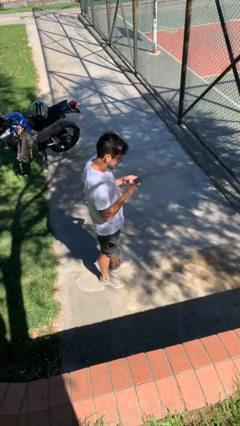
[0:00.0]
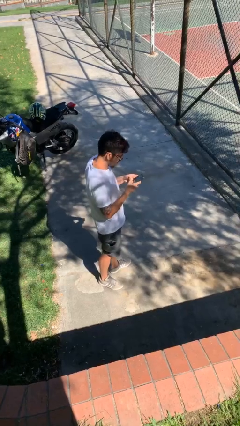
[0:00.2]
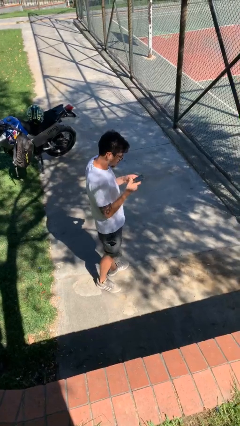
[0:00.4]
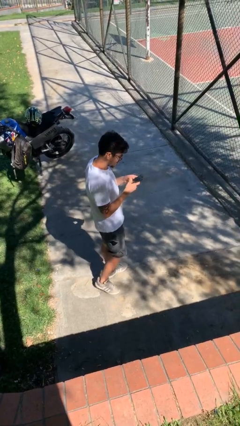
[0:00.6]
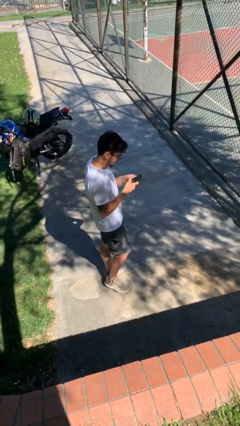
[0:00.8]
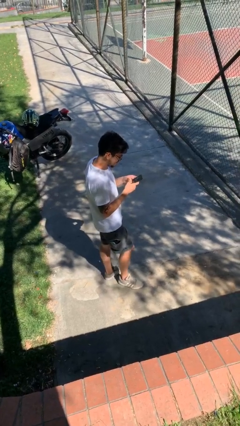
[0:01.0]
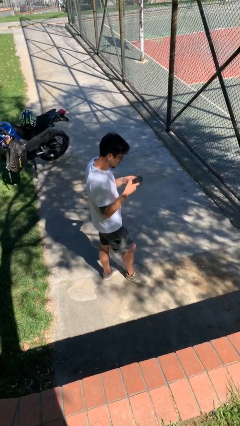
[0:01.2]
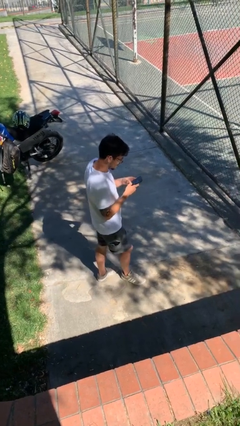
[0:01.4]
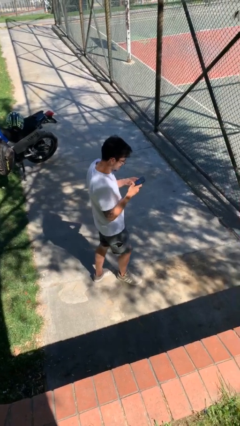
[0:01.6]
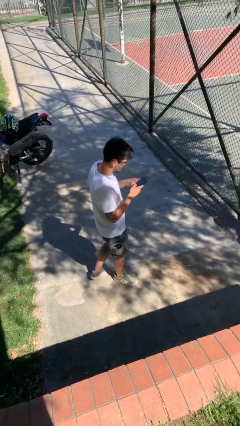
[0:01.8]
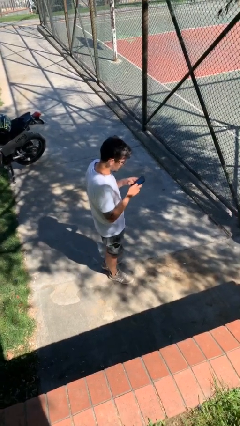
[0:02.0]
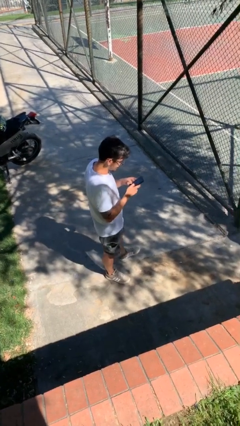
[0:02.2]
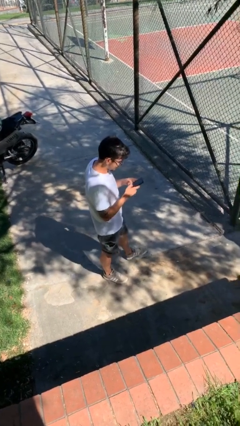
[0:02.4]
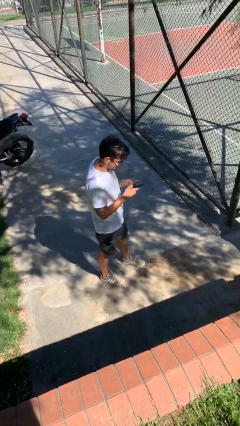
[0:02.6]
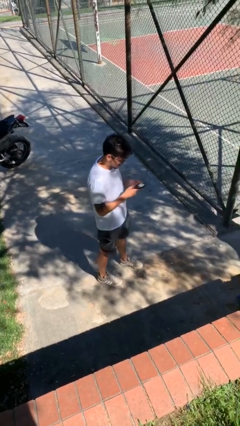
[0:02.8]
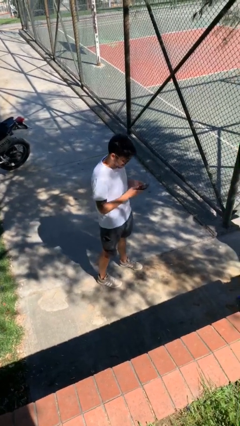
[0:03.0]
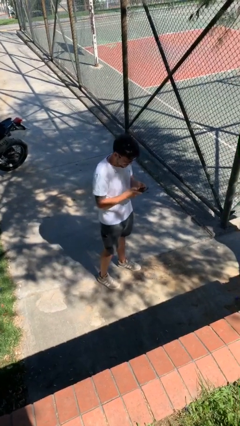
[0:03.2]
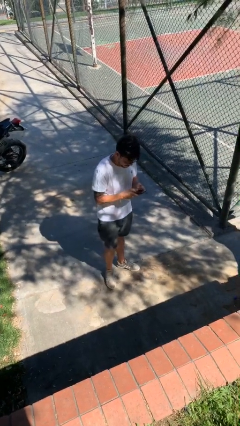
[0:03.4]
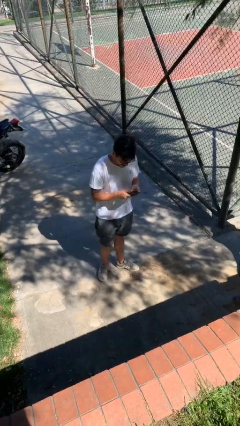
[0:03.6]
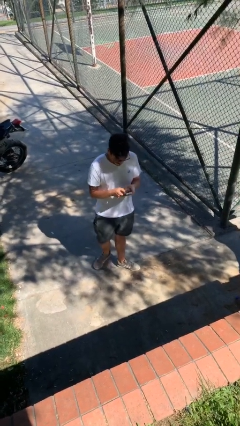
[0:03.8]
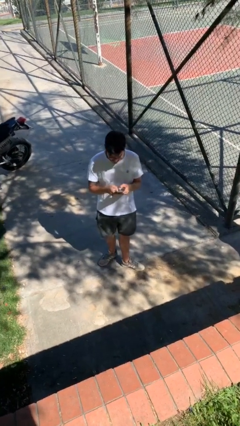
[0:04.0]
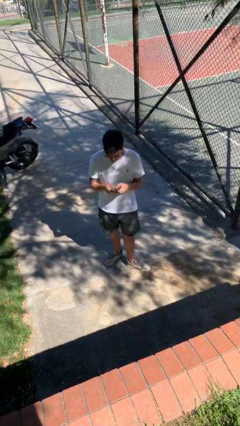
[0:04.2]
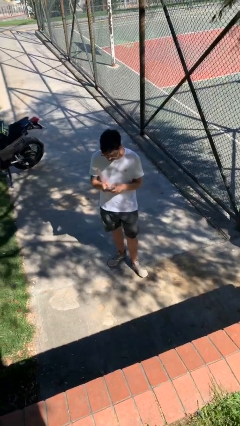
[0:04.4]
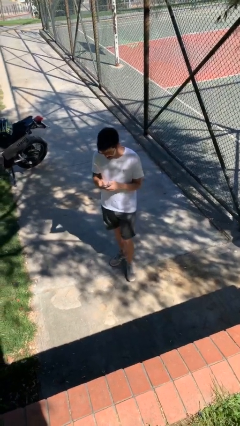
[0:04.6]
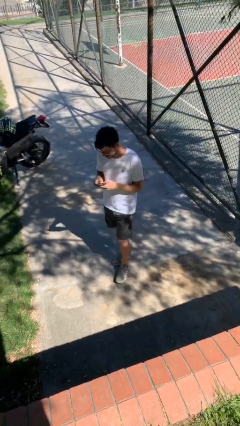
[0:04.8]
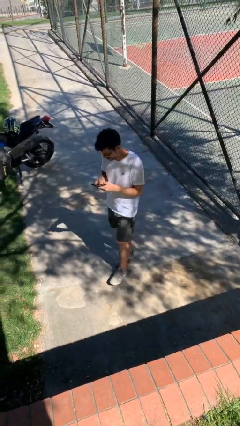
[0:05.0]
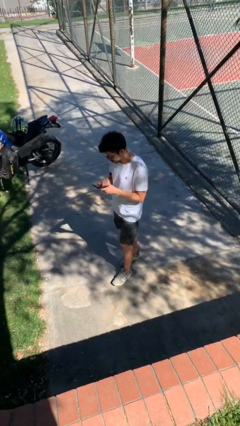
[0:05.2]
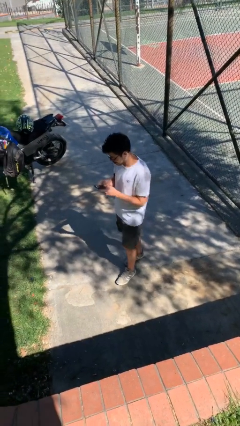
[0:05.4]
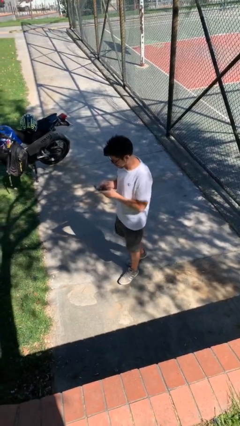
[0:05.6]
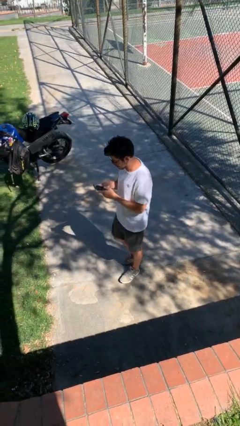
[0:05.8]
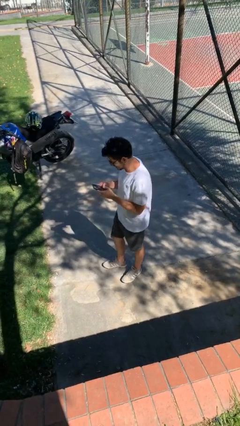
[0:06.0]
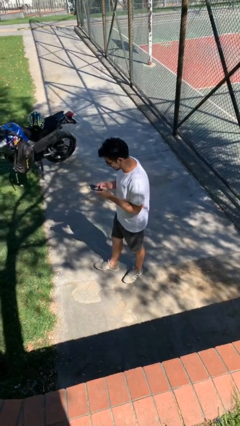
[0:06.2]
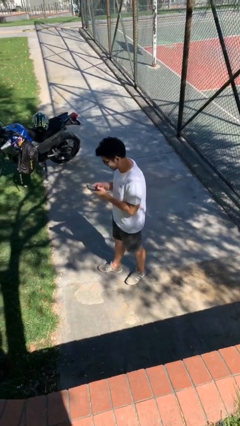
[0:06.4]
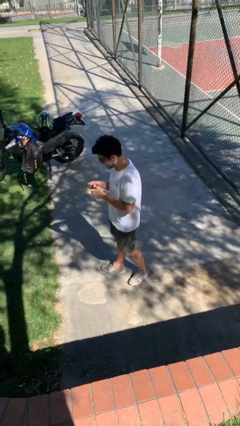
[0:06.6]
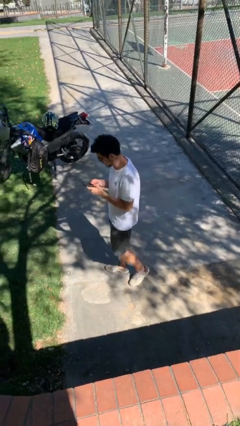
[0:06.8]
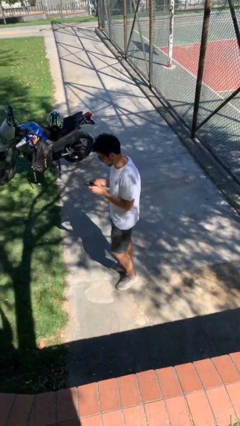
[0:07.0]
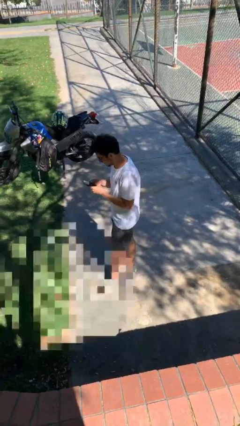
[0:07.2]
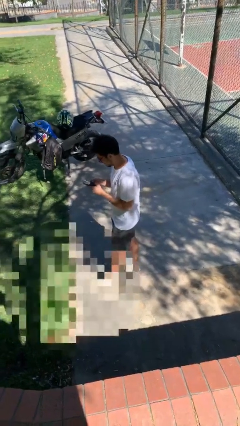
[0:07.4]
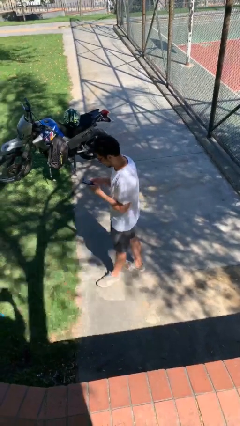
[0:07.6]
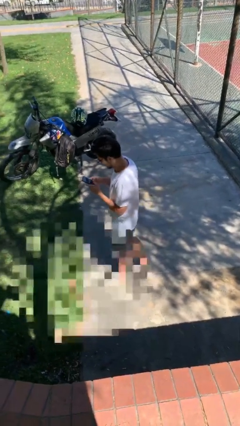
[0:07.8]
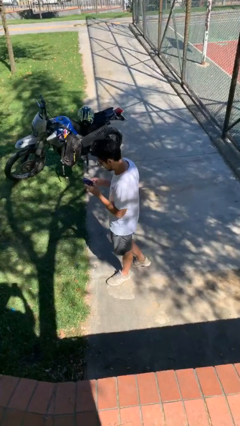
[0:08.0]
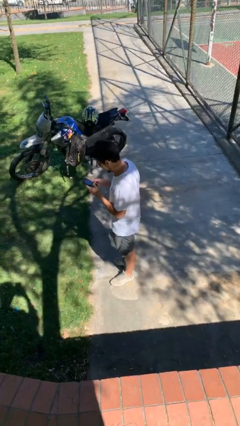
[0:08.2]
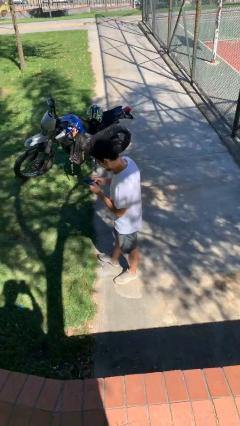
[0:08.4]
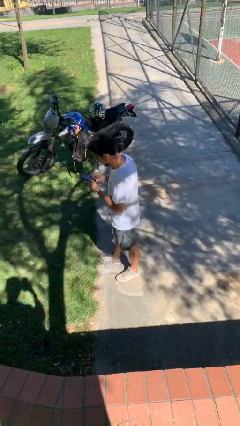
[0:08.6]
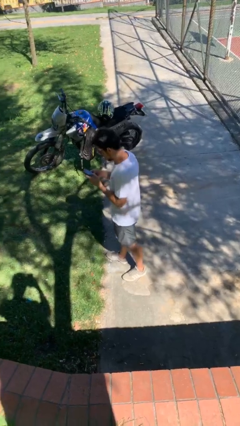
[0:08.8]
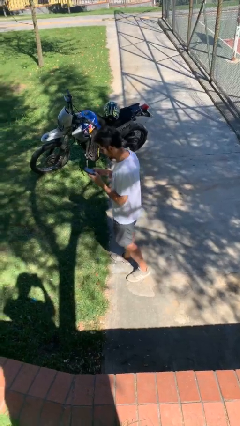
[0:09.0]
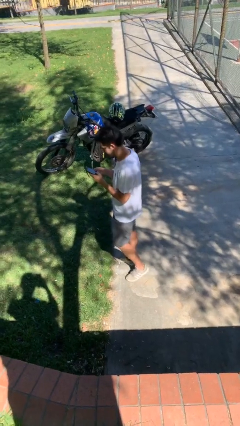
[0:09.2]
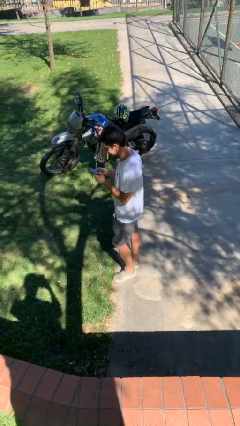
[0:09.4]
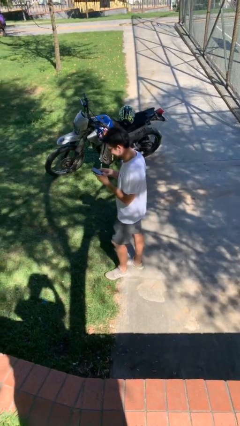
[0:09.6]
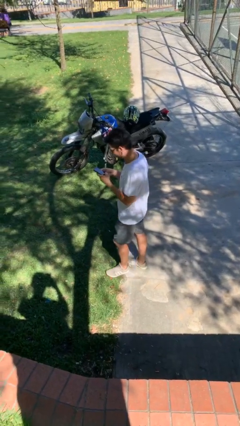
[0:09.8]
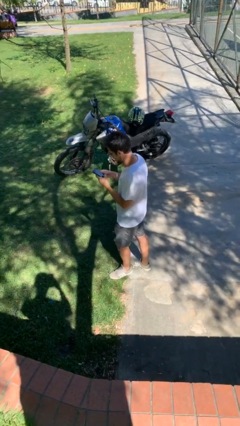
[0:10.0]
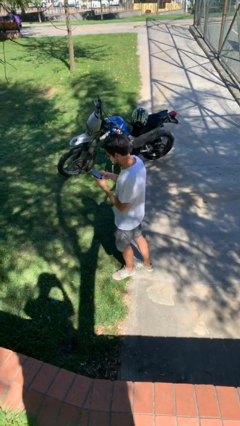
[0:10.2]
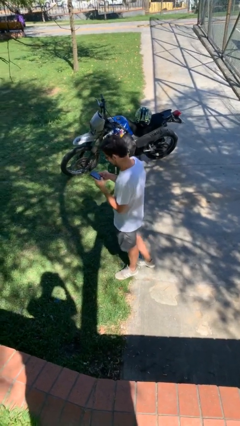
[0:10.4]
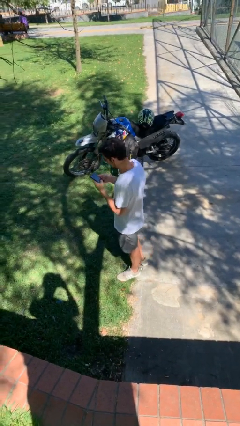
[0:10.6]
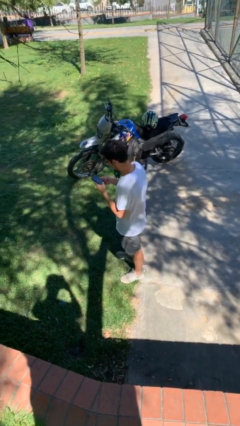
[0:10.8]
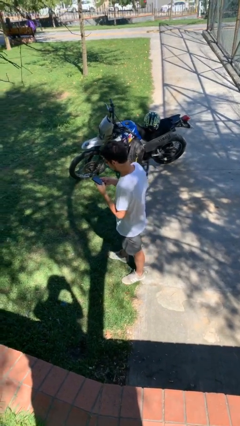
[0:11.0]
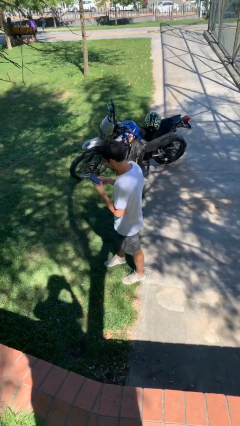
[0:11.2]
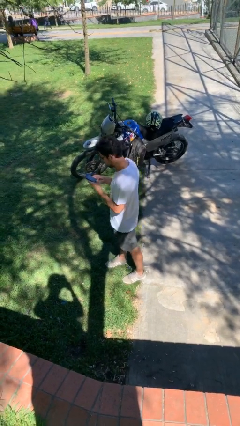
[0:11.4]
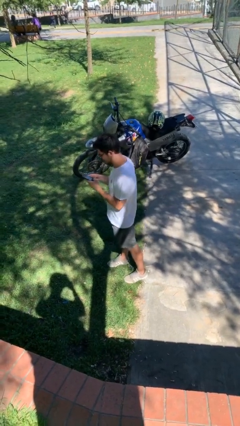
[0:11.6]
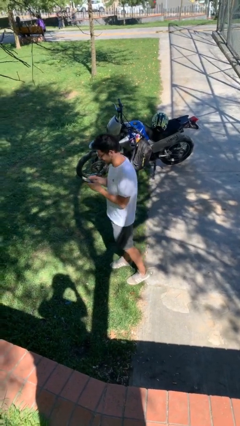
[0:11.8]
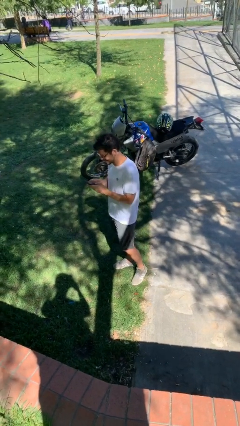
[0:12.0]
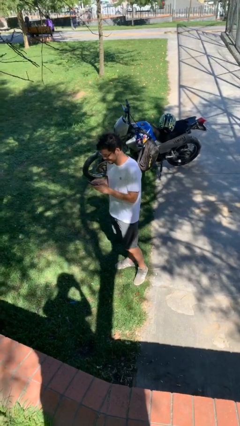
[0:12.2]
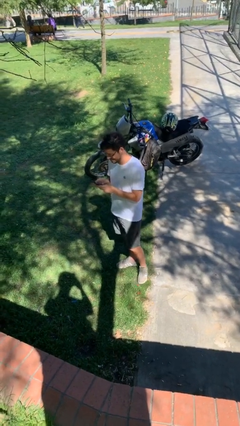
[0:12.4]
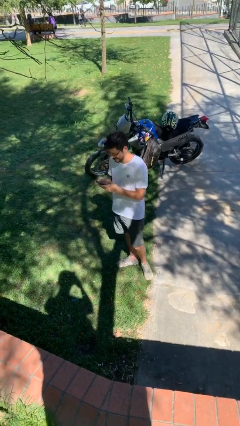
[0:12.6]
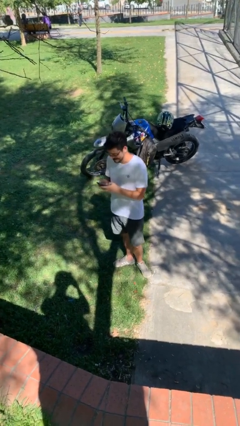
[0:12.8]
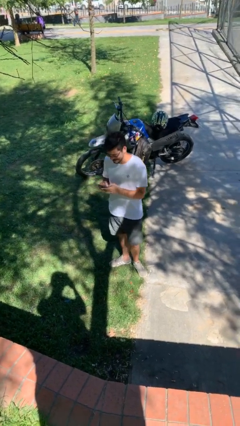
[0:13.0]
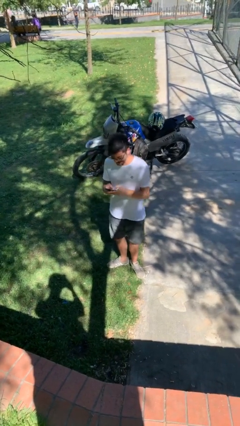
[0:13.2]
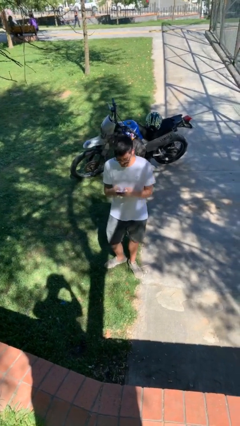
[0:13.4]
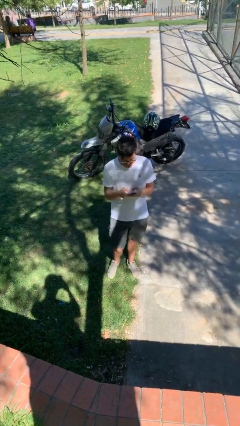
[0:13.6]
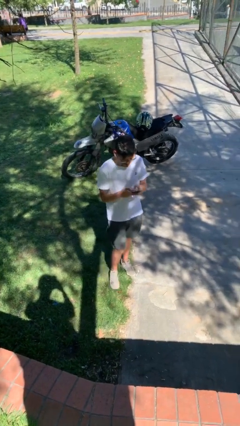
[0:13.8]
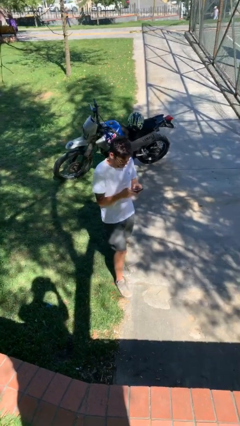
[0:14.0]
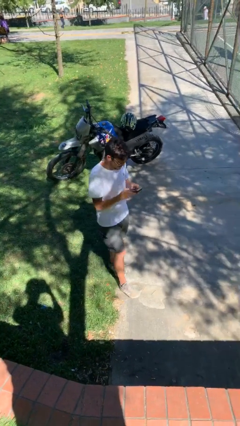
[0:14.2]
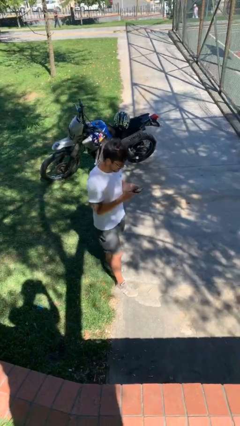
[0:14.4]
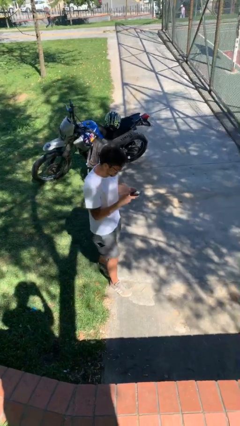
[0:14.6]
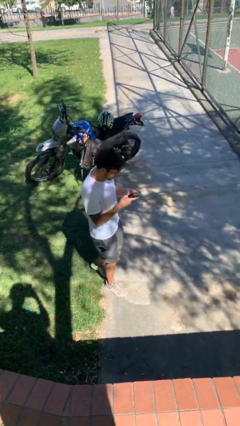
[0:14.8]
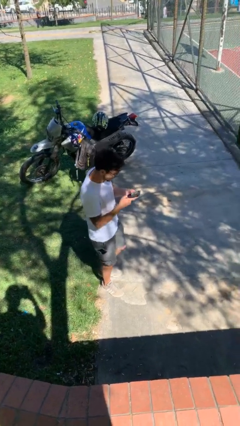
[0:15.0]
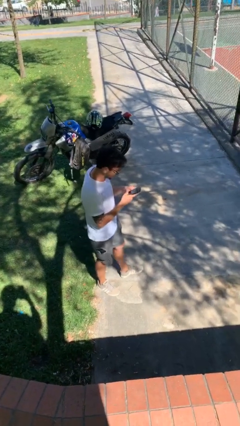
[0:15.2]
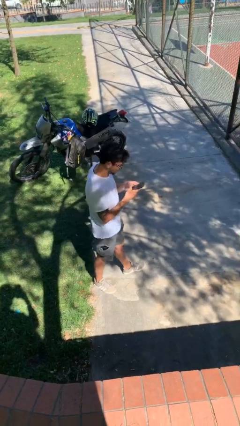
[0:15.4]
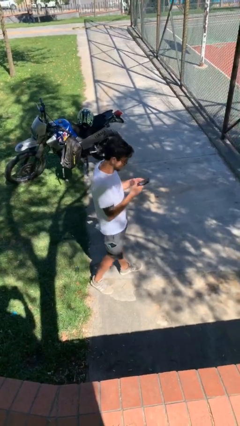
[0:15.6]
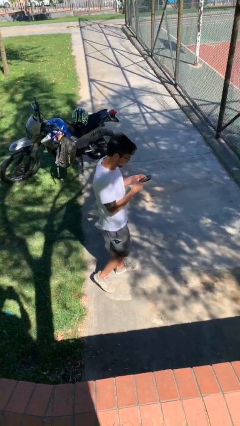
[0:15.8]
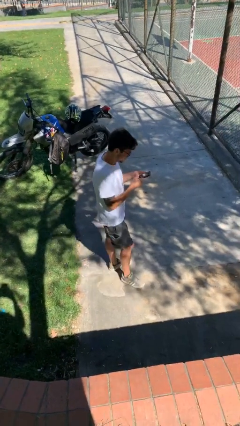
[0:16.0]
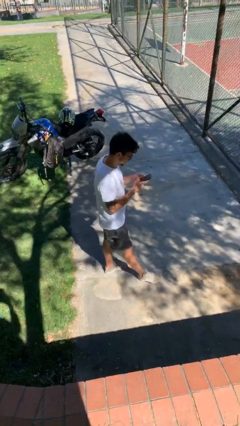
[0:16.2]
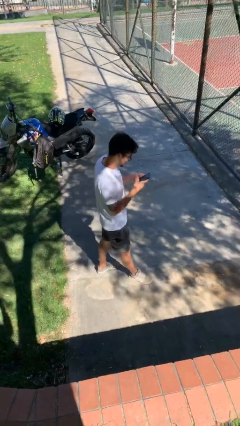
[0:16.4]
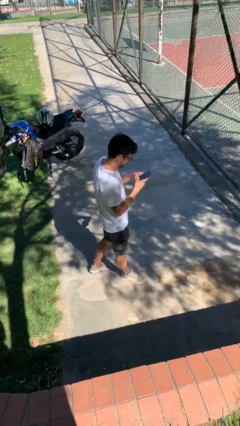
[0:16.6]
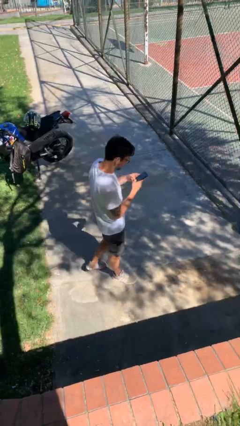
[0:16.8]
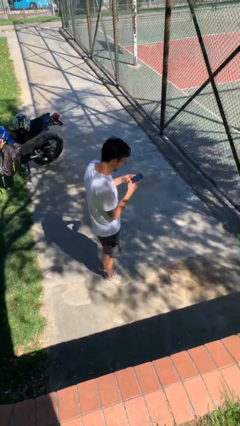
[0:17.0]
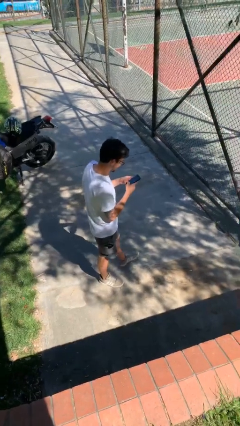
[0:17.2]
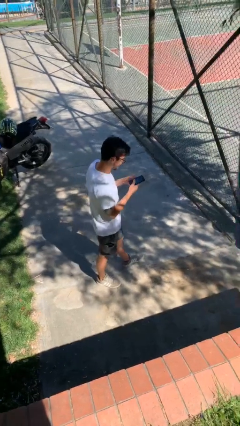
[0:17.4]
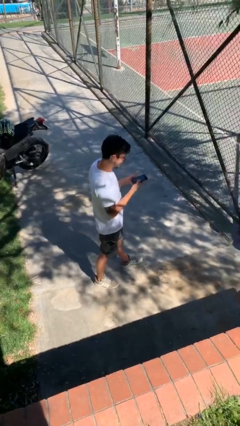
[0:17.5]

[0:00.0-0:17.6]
person texts on phone

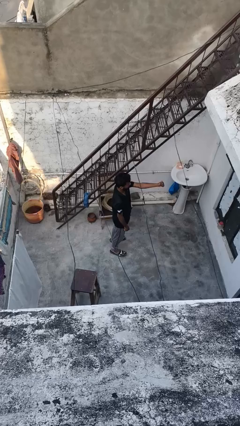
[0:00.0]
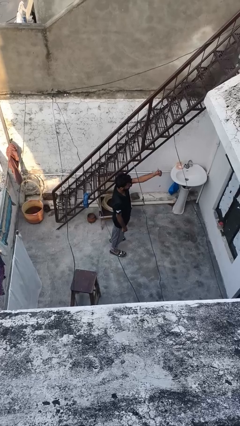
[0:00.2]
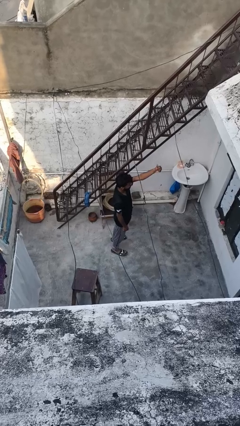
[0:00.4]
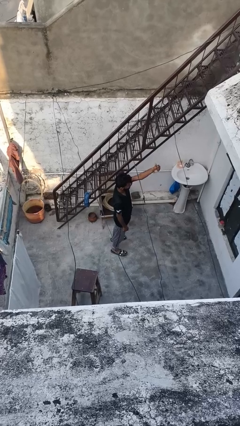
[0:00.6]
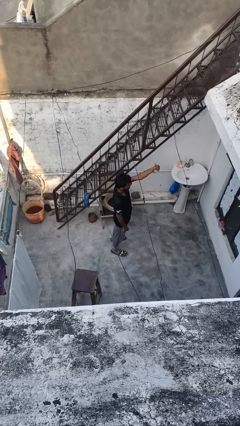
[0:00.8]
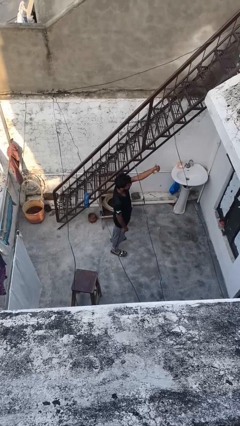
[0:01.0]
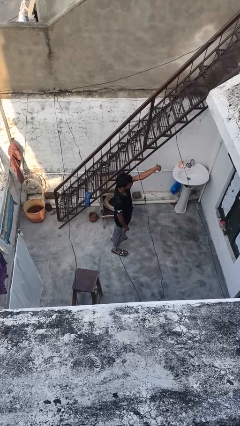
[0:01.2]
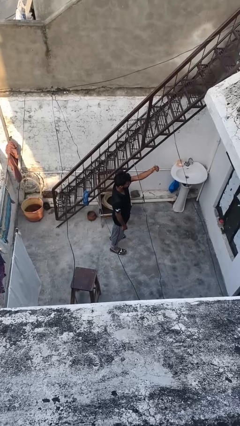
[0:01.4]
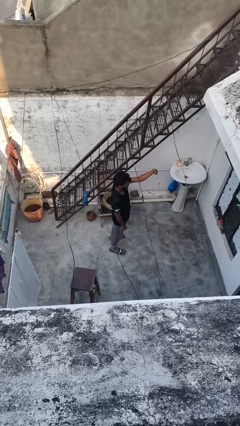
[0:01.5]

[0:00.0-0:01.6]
person gestures thumbs up
